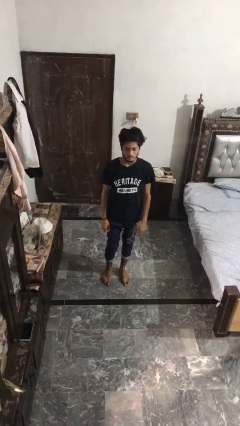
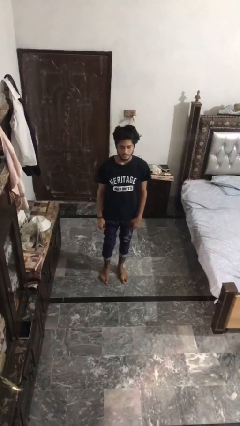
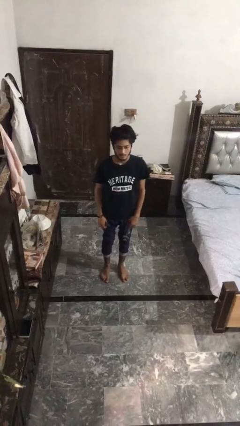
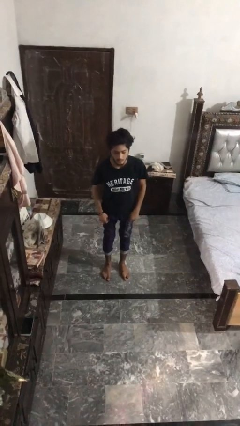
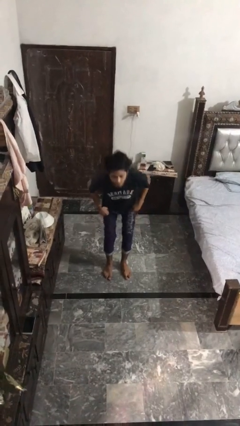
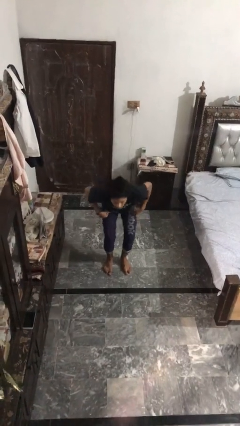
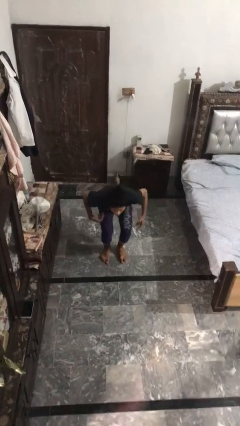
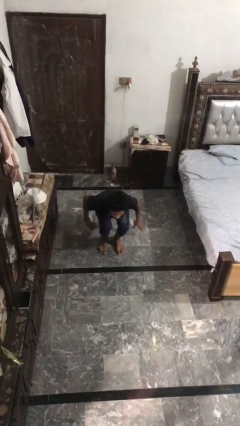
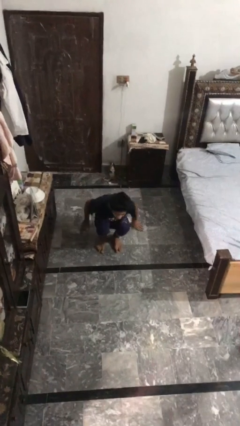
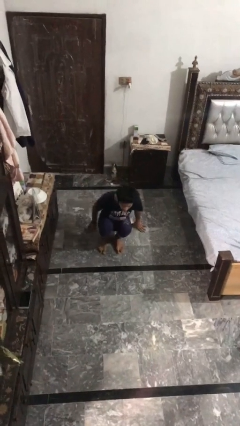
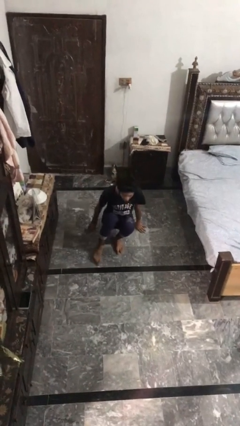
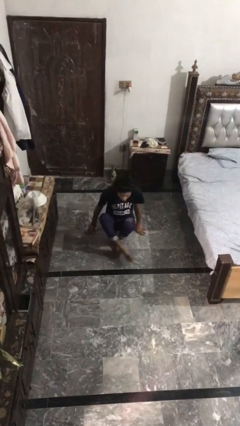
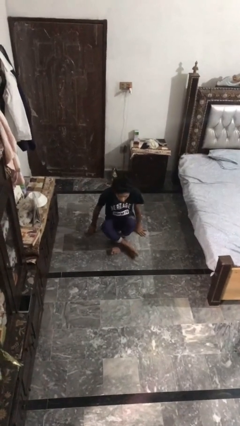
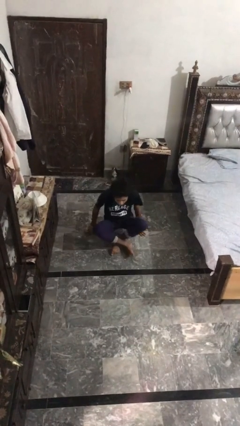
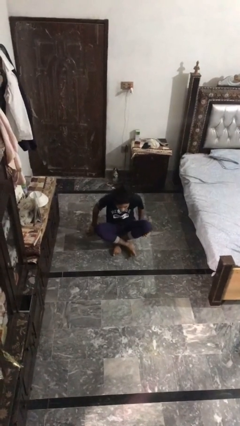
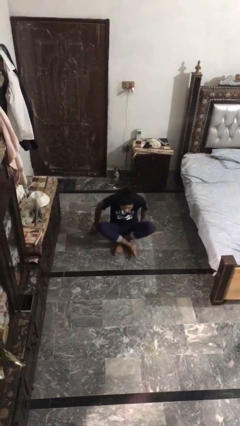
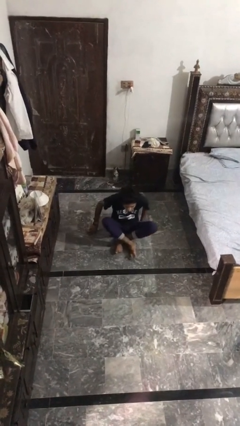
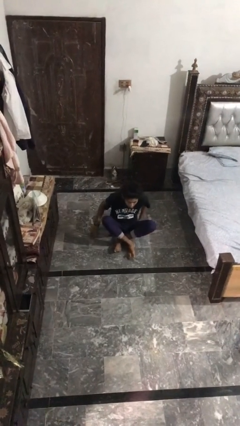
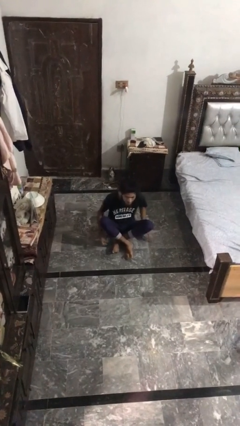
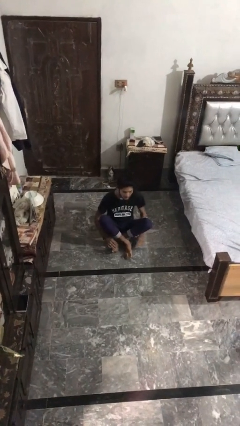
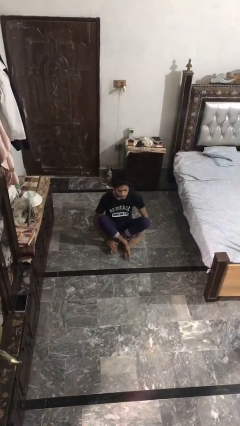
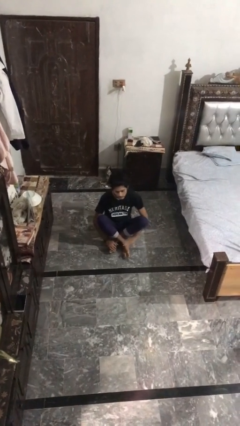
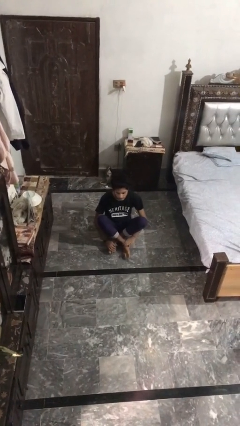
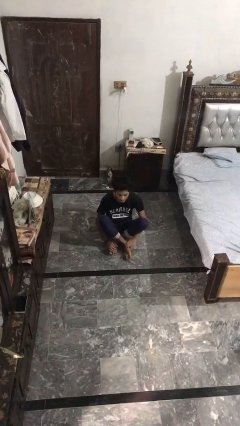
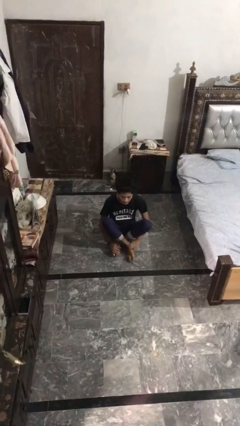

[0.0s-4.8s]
person sits crisscross

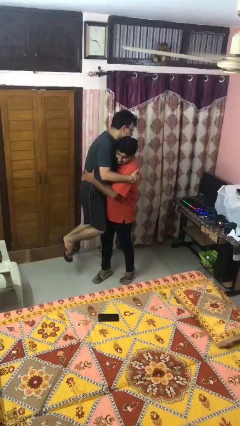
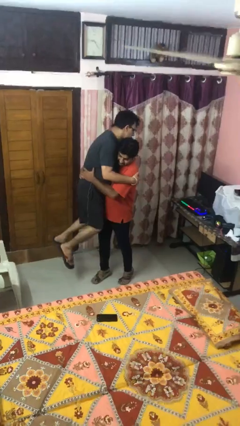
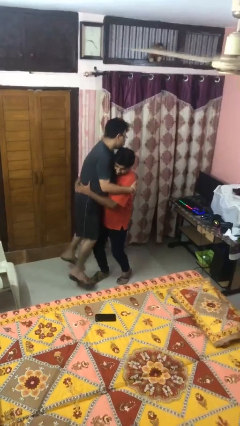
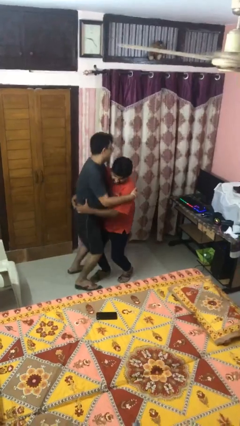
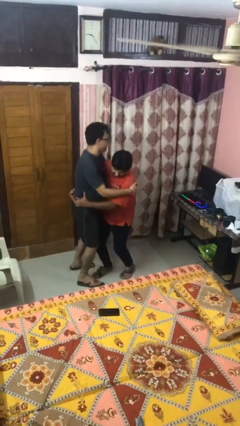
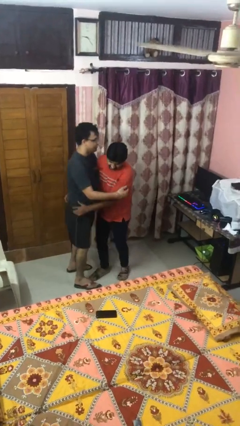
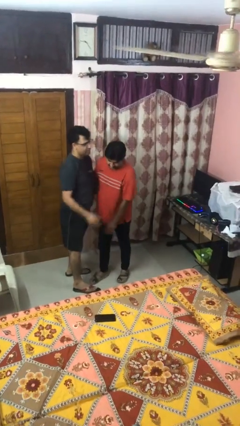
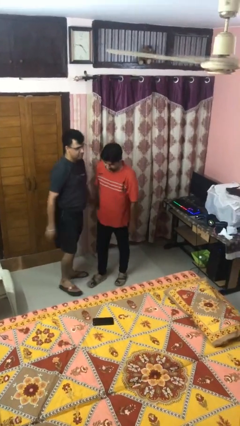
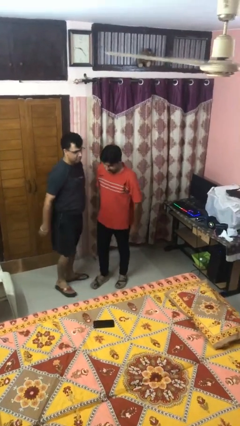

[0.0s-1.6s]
person puts down person

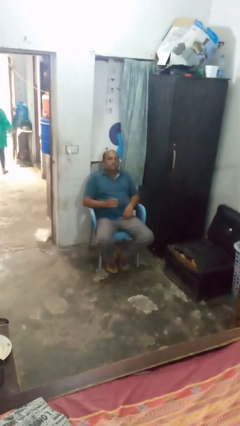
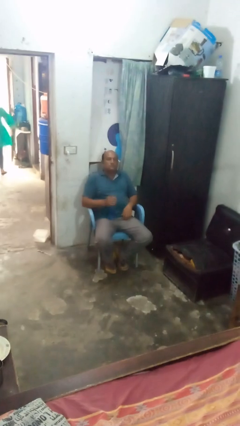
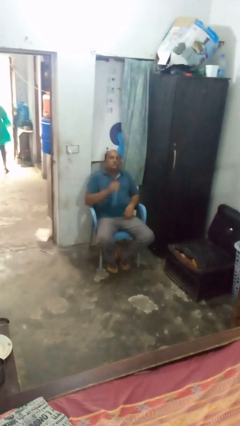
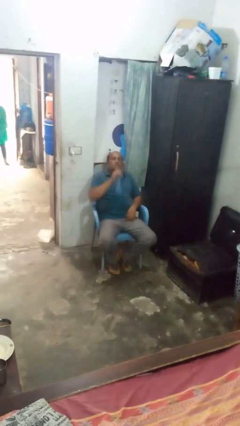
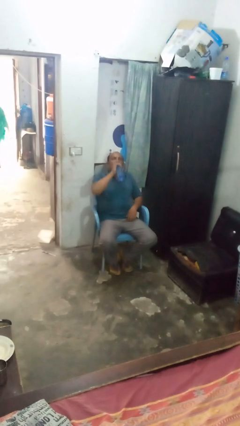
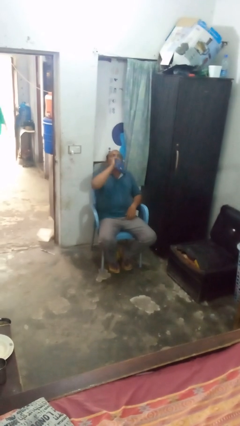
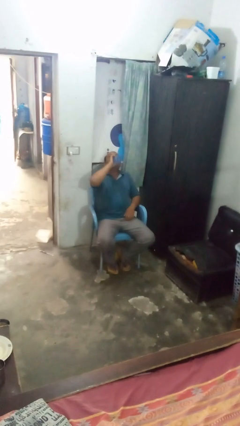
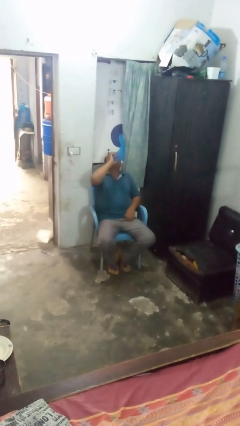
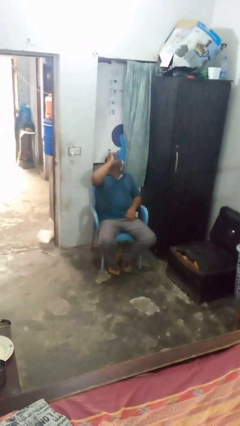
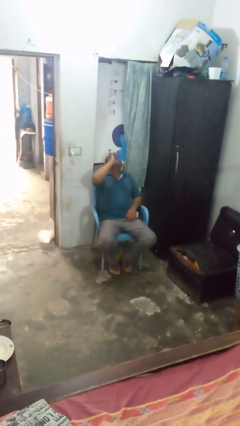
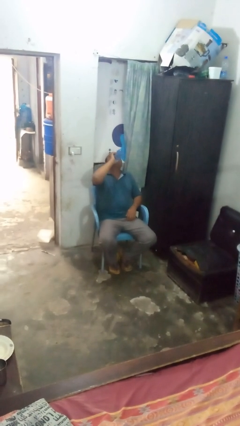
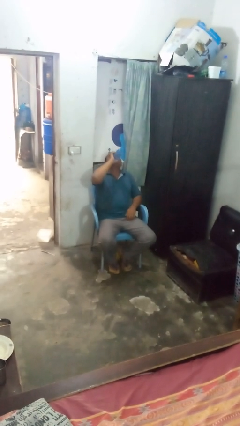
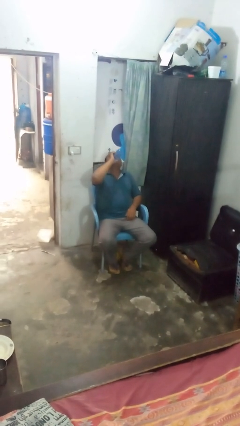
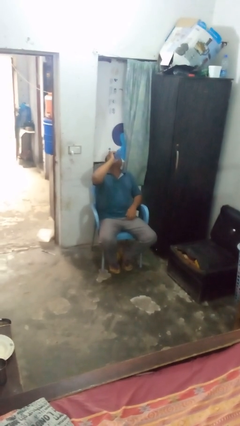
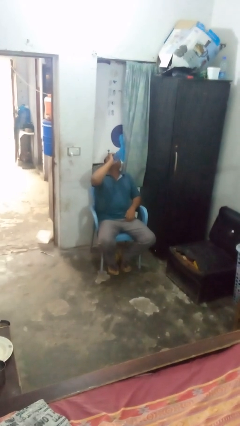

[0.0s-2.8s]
person drinks from bottle

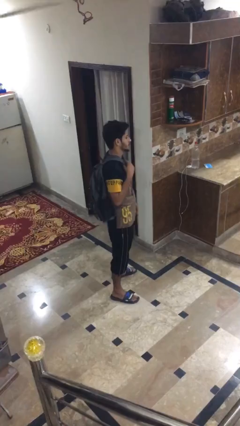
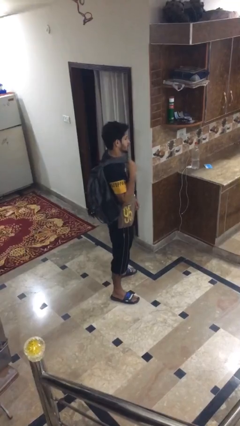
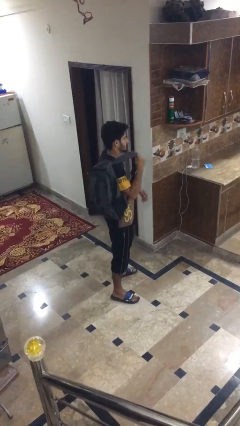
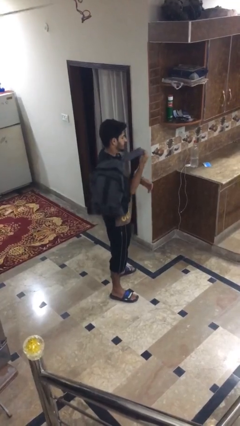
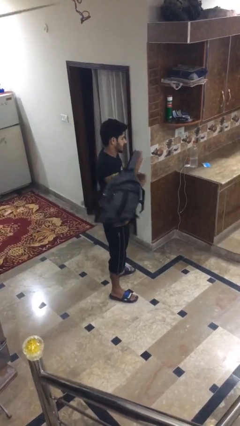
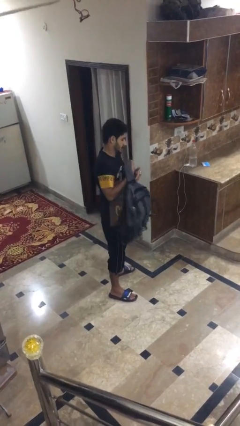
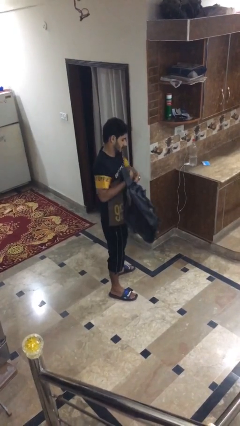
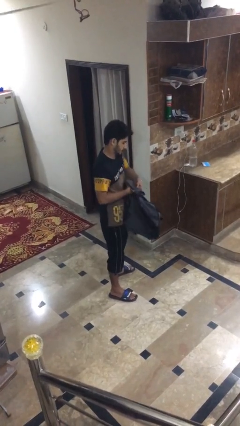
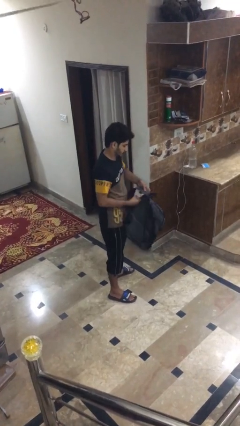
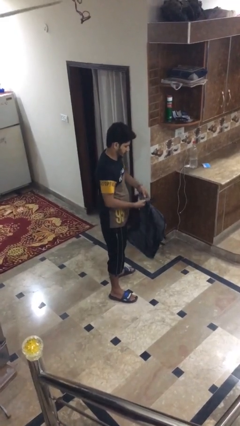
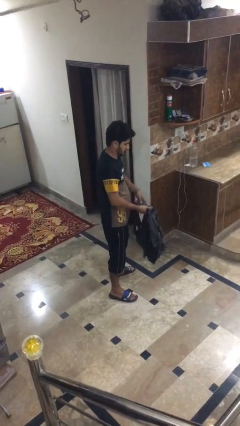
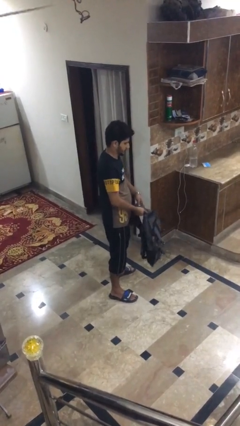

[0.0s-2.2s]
person takes off backpack

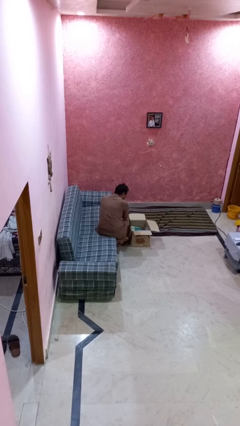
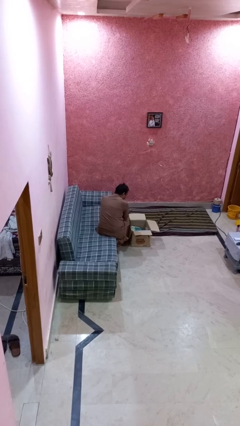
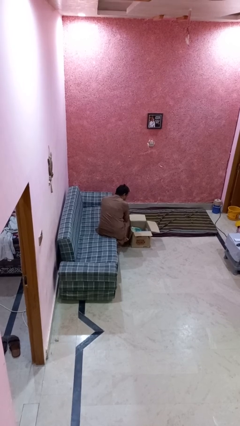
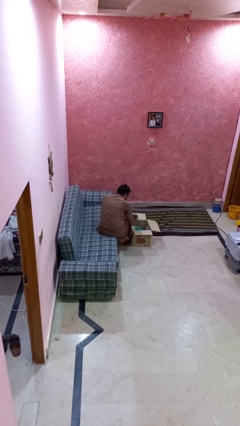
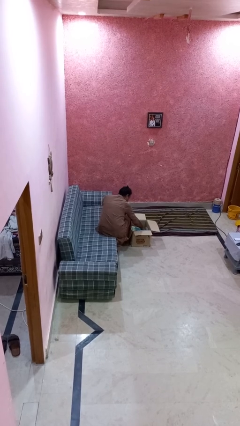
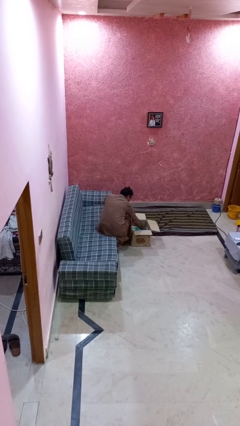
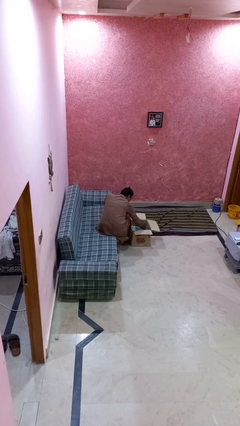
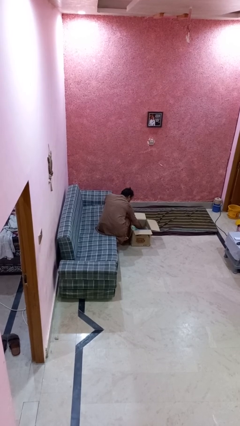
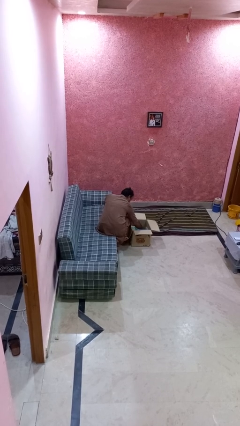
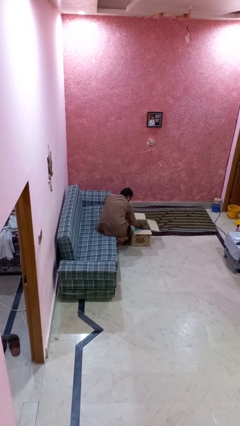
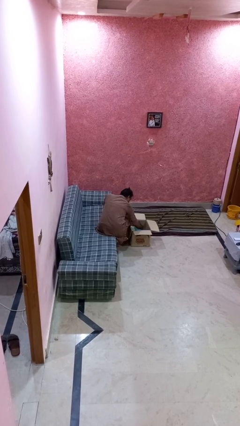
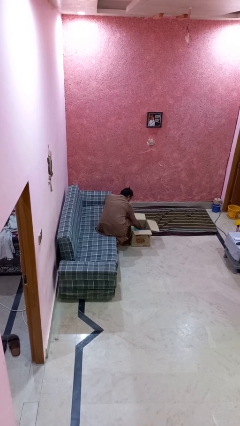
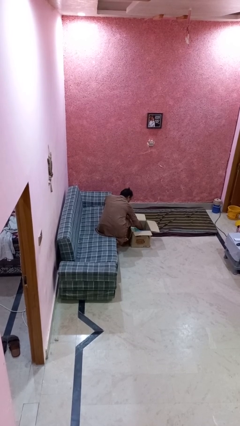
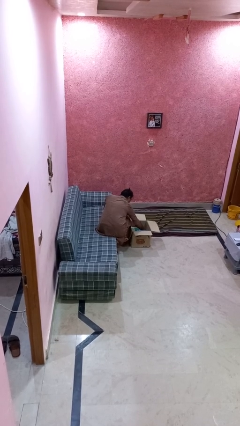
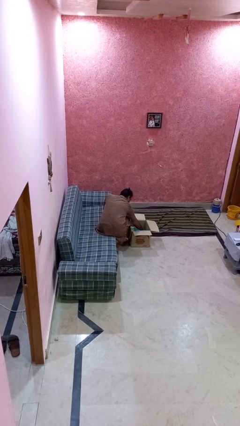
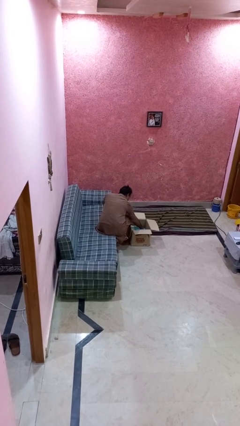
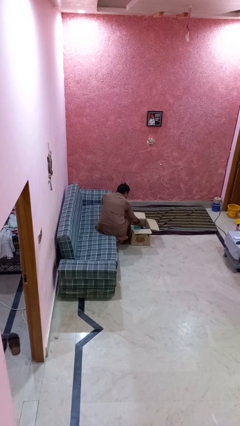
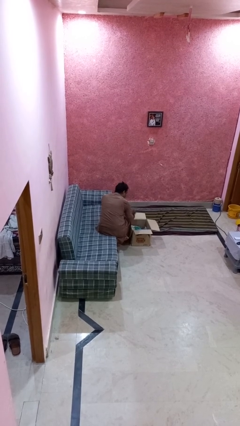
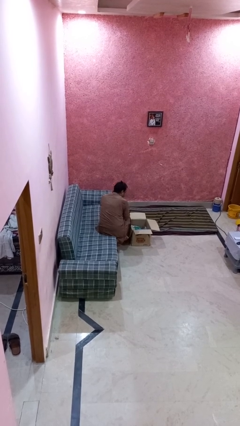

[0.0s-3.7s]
person searches in box

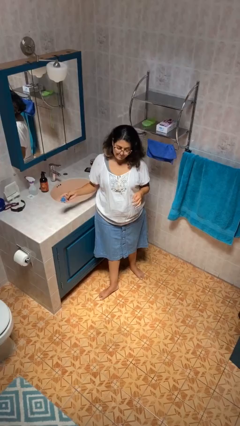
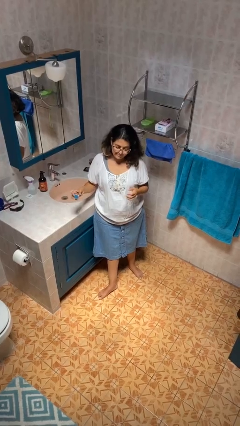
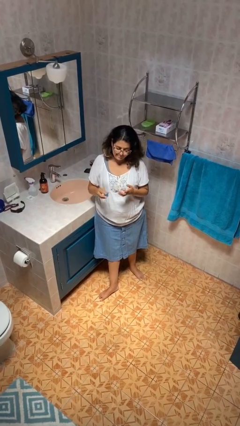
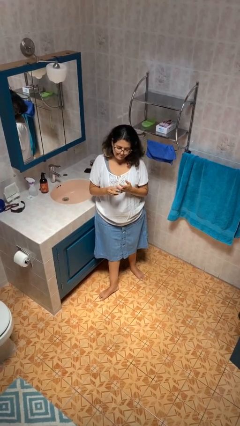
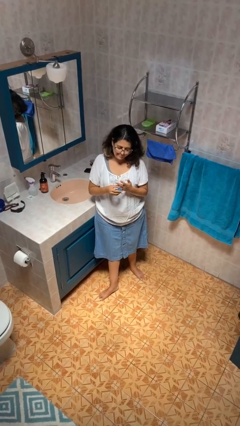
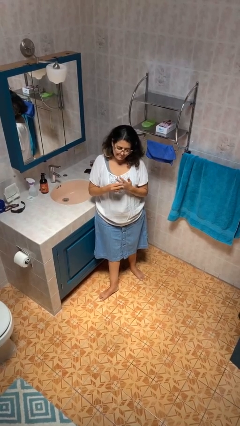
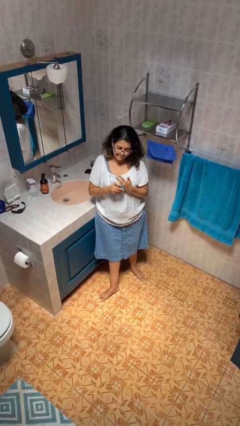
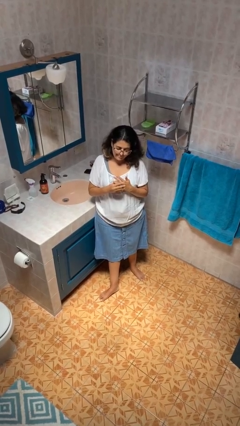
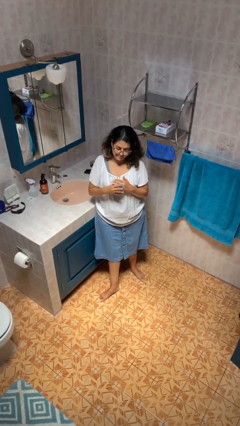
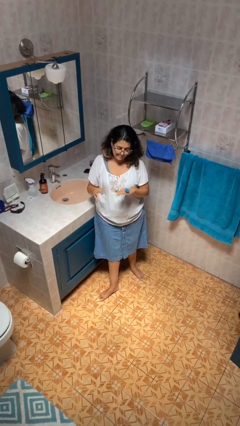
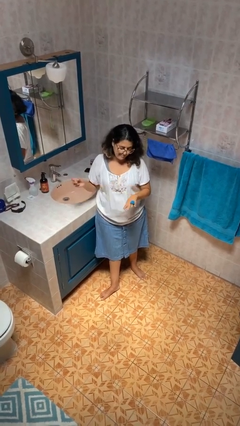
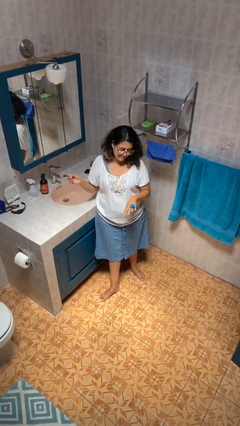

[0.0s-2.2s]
person puts on ring

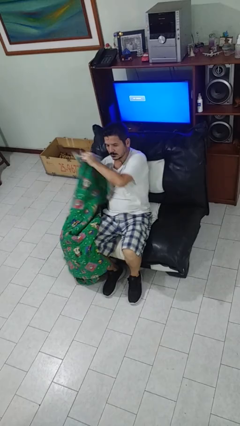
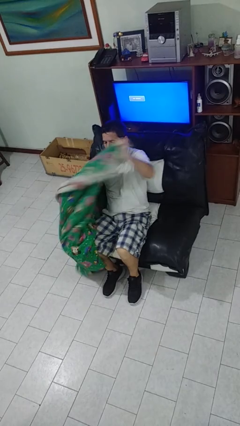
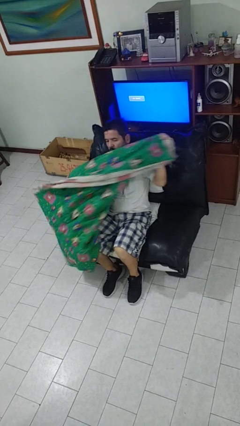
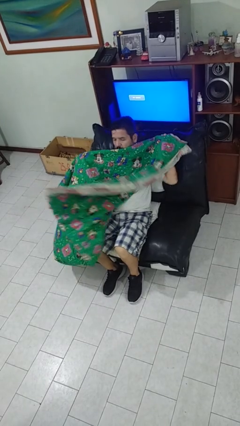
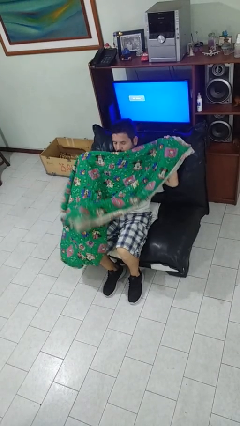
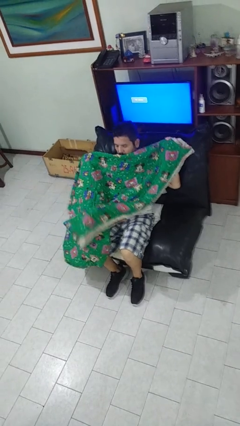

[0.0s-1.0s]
person covers with blanket
